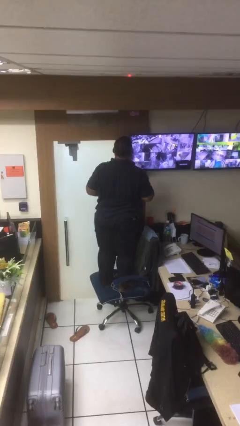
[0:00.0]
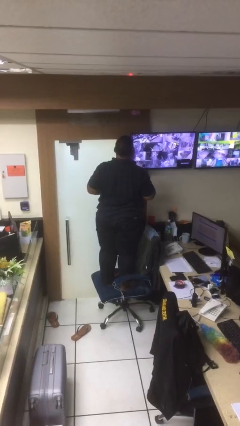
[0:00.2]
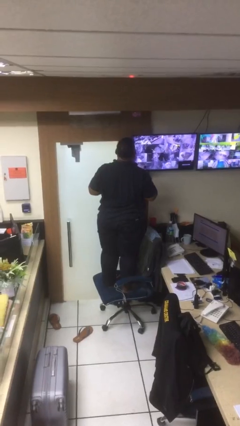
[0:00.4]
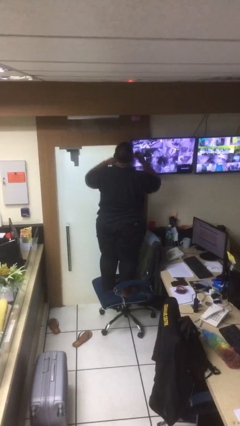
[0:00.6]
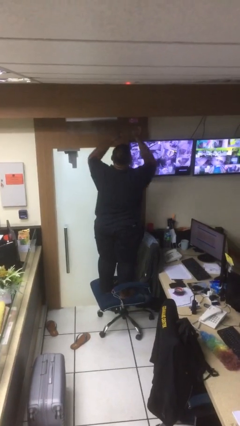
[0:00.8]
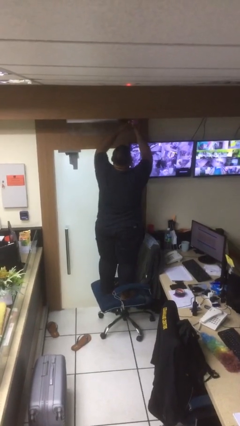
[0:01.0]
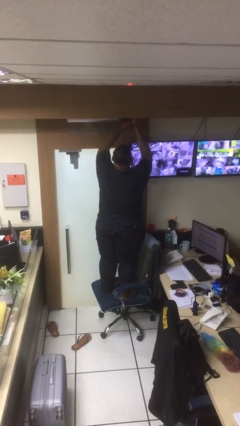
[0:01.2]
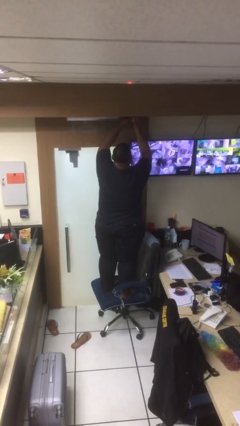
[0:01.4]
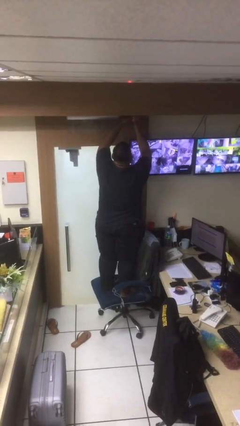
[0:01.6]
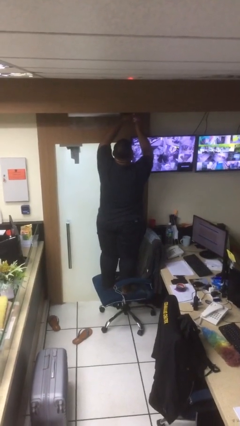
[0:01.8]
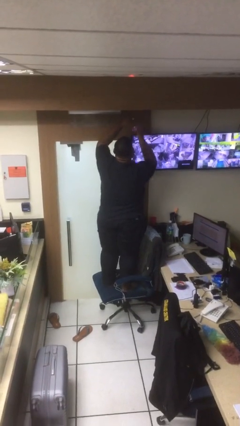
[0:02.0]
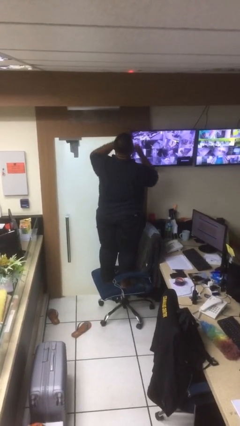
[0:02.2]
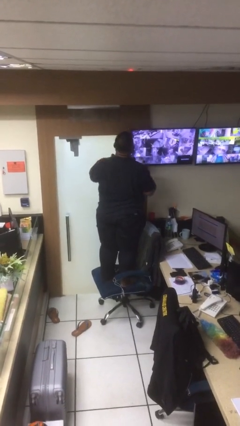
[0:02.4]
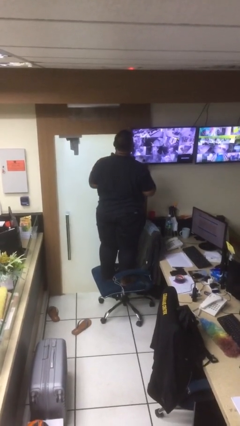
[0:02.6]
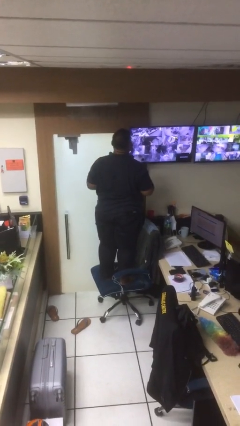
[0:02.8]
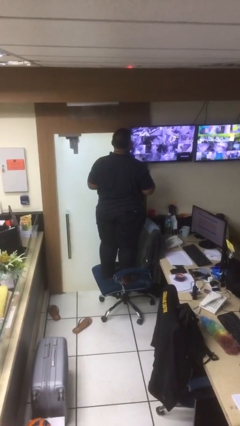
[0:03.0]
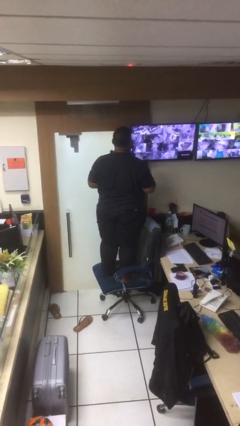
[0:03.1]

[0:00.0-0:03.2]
person takes down smoke detector

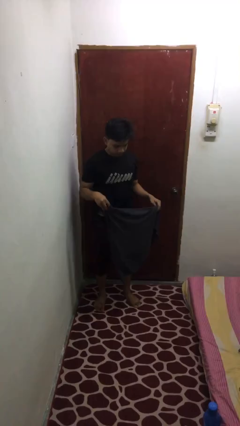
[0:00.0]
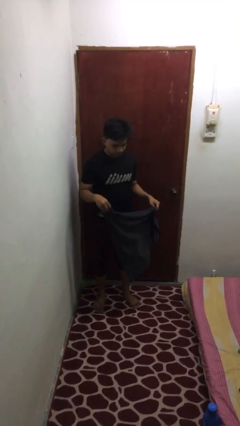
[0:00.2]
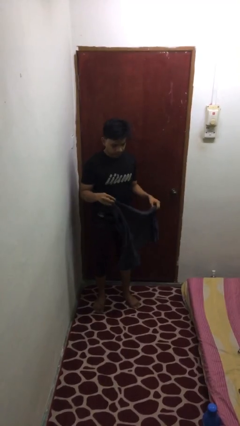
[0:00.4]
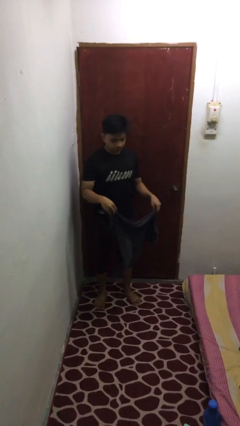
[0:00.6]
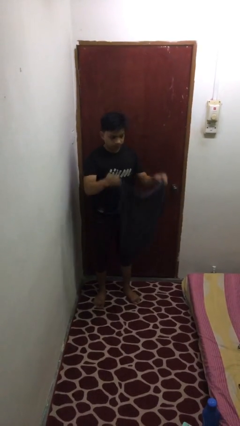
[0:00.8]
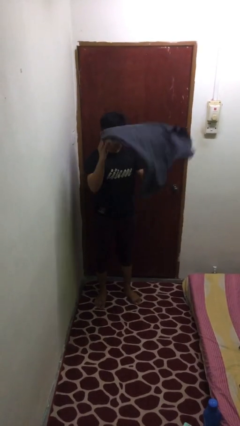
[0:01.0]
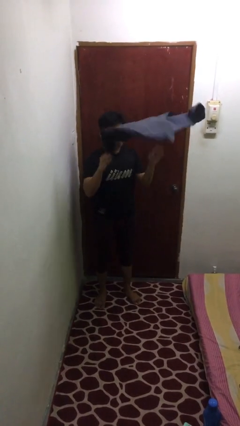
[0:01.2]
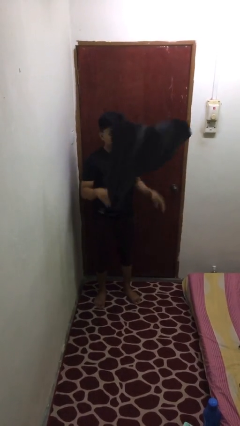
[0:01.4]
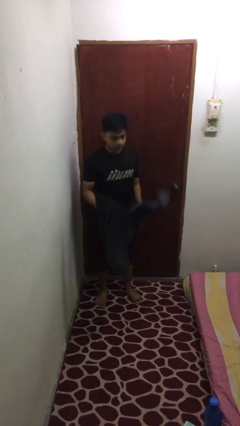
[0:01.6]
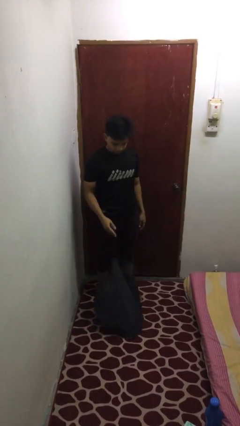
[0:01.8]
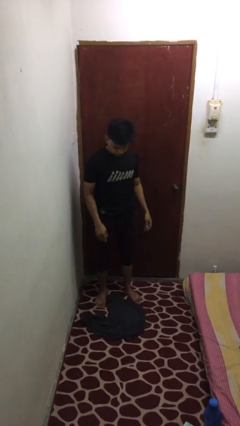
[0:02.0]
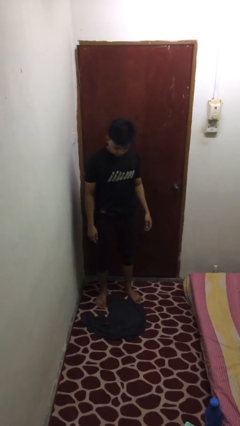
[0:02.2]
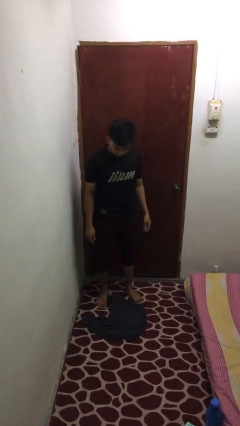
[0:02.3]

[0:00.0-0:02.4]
person throws object into air

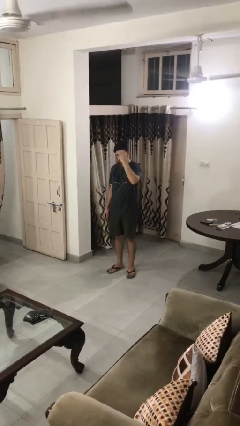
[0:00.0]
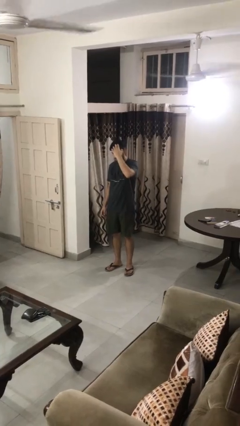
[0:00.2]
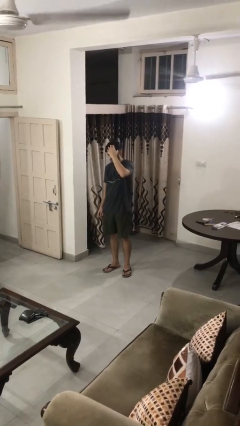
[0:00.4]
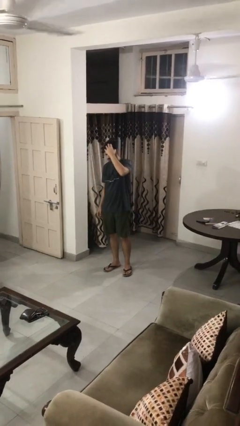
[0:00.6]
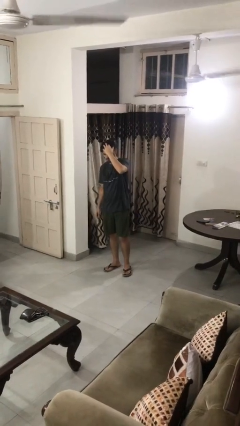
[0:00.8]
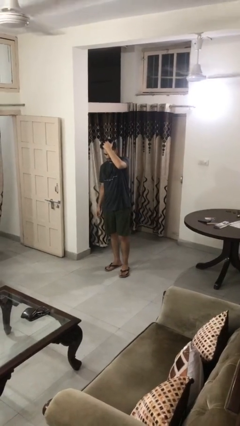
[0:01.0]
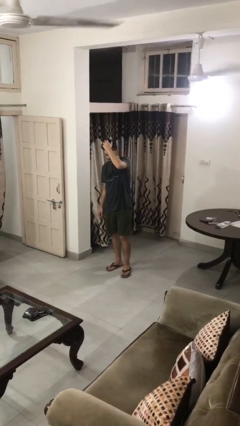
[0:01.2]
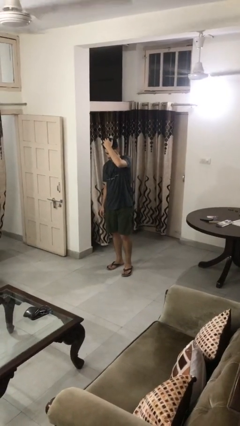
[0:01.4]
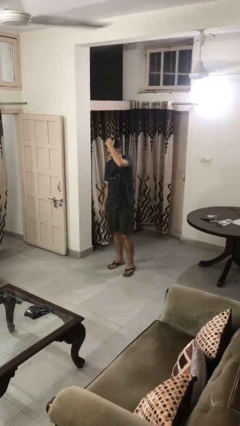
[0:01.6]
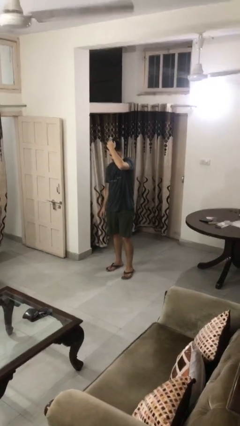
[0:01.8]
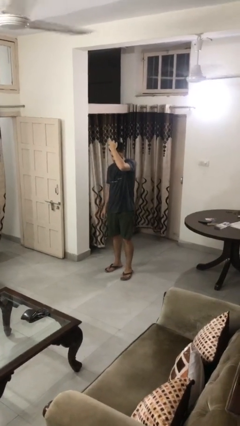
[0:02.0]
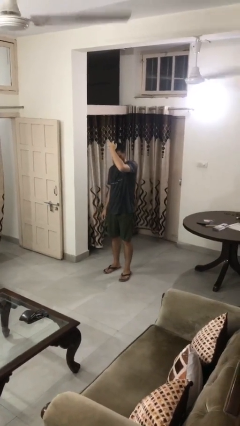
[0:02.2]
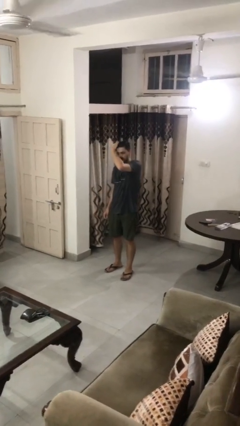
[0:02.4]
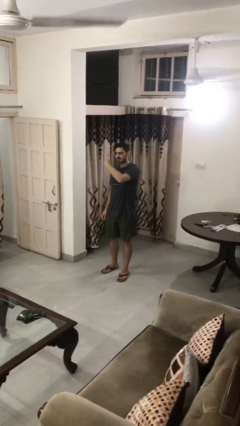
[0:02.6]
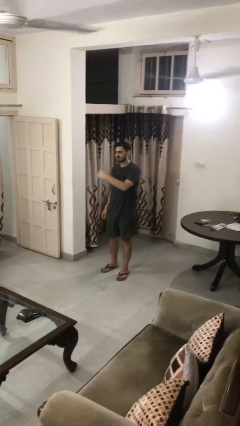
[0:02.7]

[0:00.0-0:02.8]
person scratches face

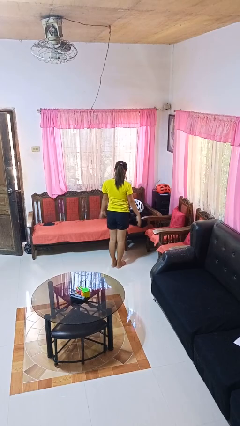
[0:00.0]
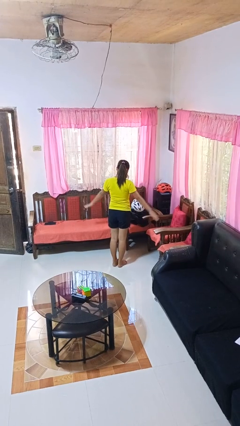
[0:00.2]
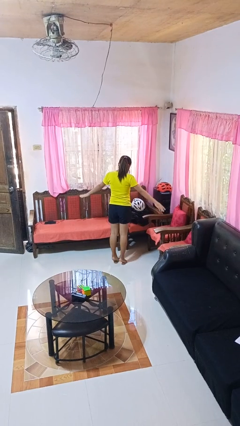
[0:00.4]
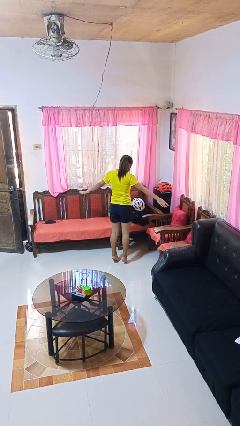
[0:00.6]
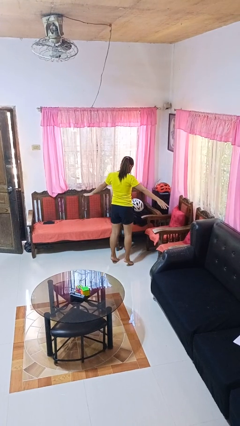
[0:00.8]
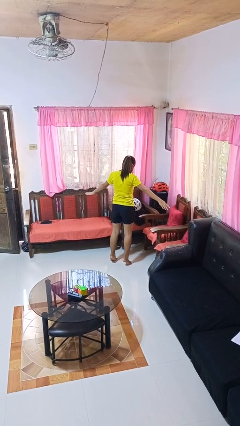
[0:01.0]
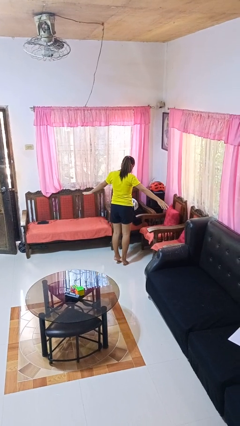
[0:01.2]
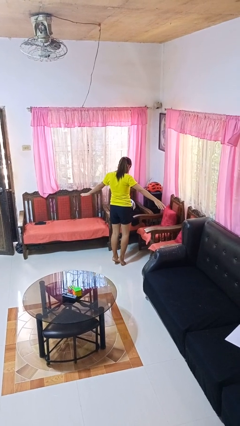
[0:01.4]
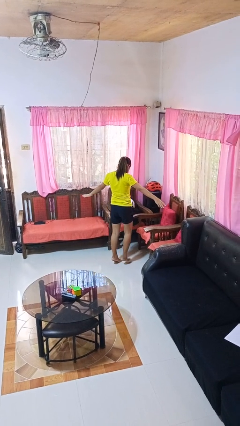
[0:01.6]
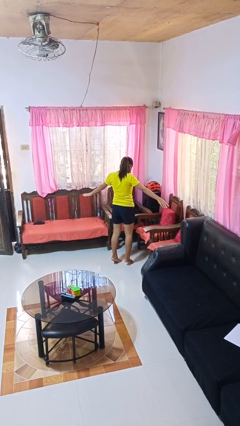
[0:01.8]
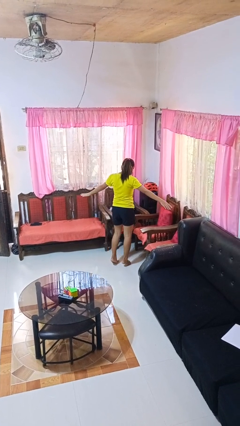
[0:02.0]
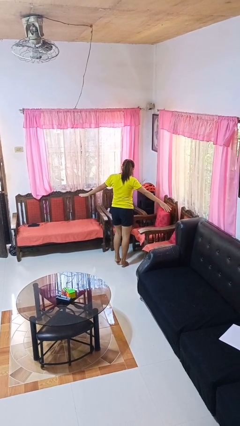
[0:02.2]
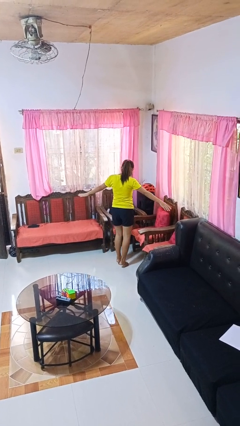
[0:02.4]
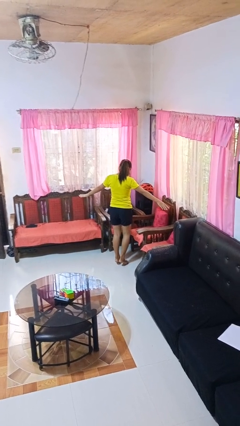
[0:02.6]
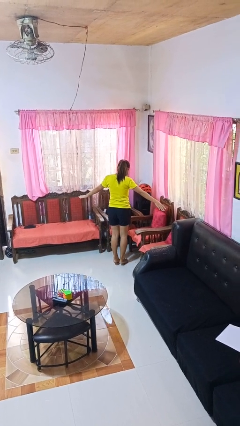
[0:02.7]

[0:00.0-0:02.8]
person walks tiptoe

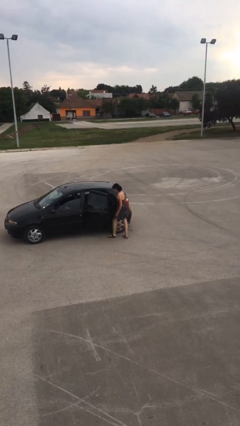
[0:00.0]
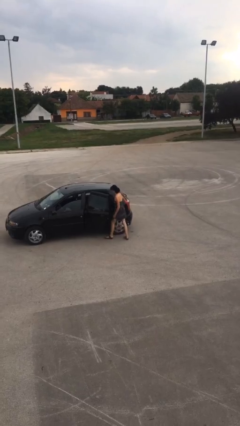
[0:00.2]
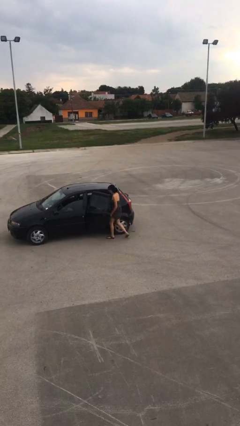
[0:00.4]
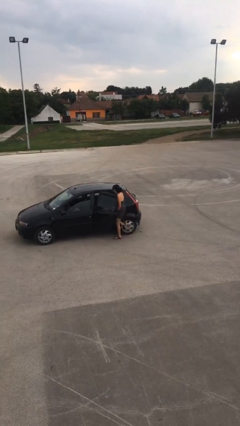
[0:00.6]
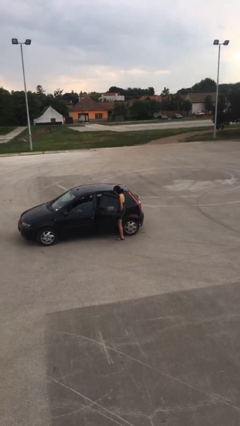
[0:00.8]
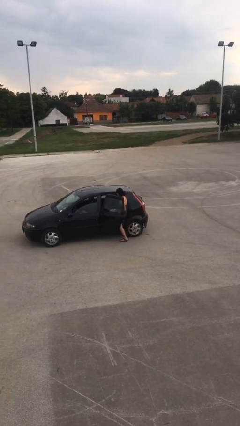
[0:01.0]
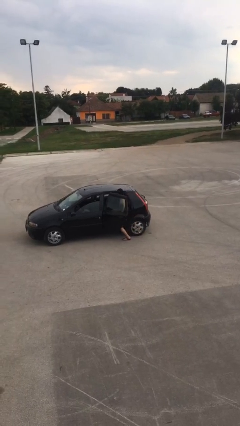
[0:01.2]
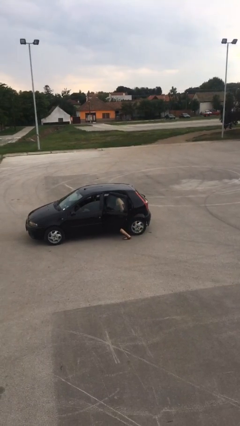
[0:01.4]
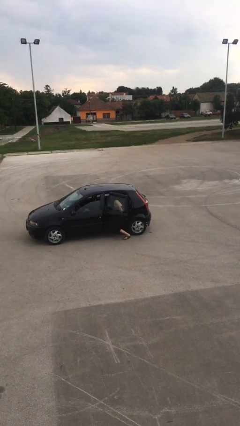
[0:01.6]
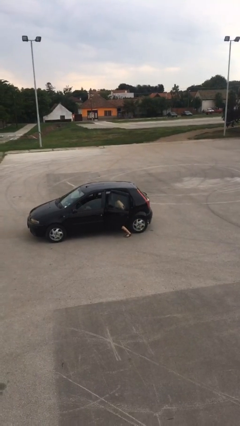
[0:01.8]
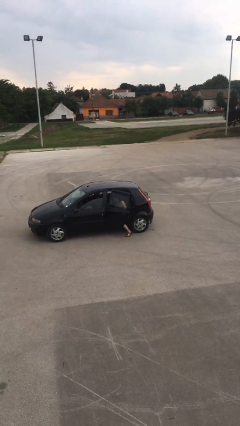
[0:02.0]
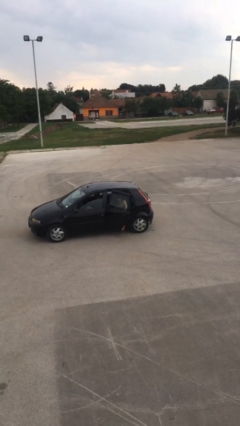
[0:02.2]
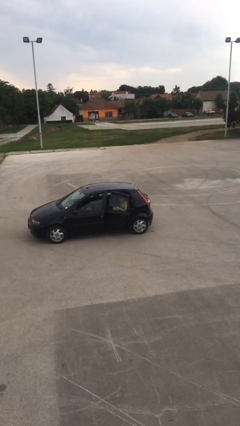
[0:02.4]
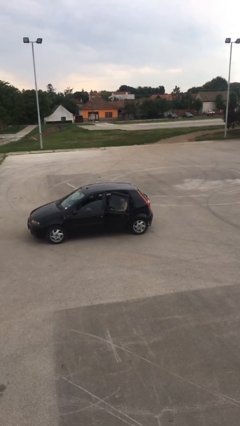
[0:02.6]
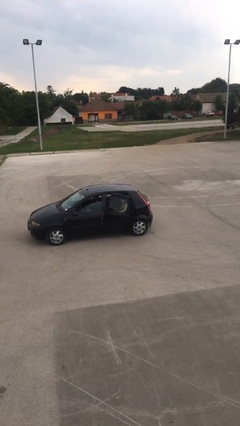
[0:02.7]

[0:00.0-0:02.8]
person enters car

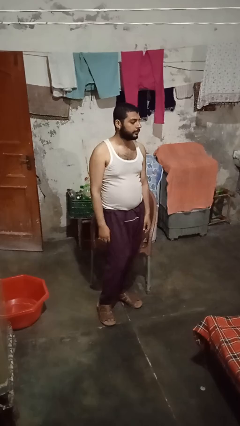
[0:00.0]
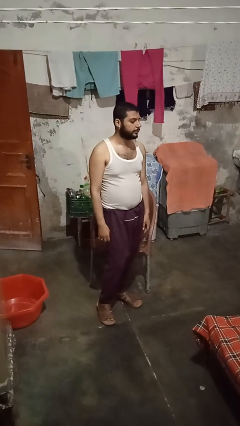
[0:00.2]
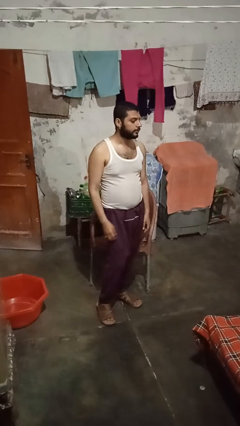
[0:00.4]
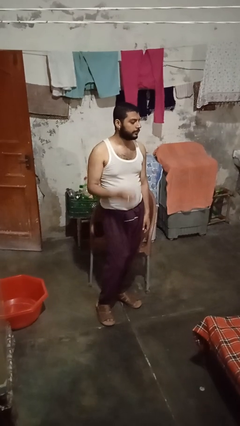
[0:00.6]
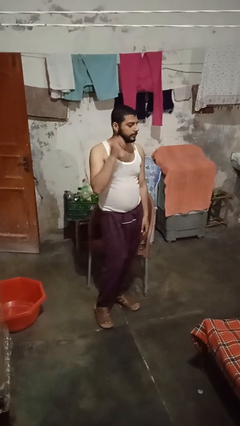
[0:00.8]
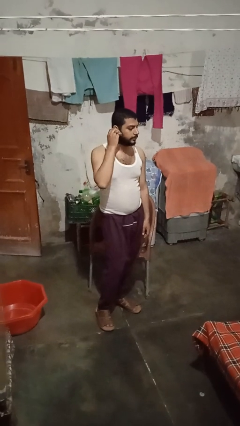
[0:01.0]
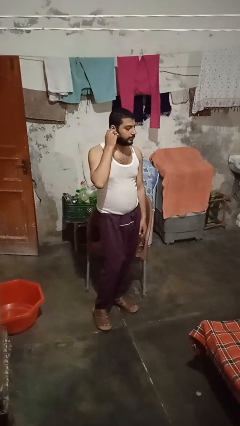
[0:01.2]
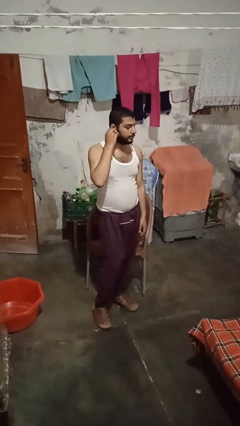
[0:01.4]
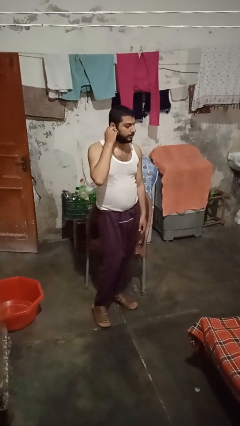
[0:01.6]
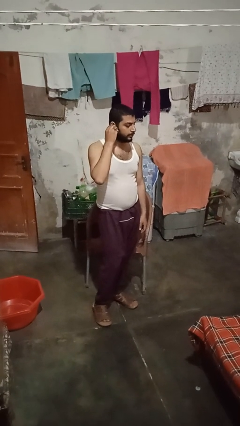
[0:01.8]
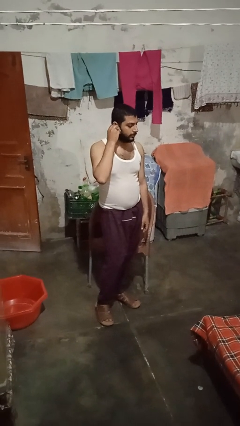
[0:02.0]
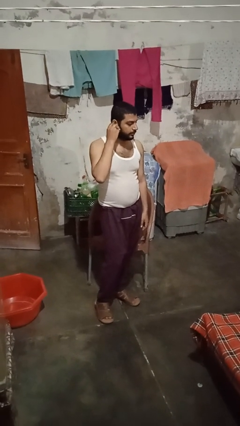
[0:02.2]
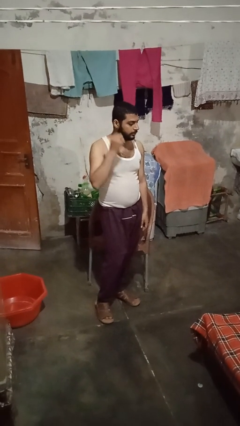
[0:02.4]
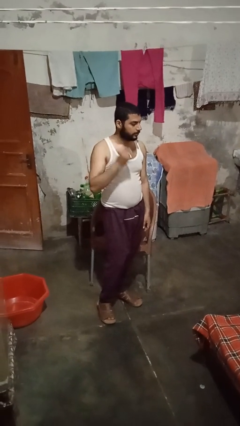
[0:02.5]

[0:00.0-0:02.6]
person takes off earrings
